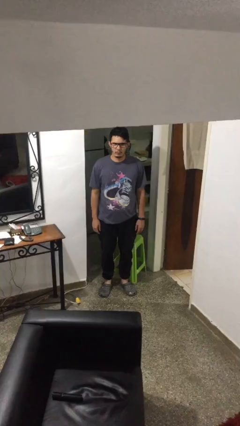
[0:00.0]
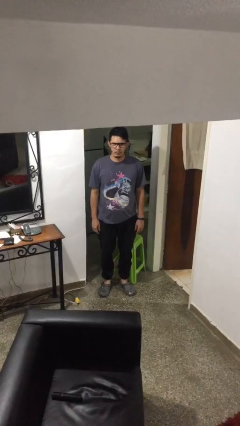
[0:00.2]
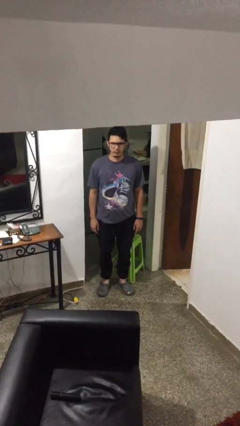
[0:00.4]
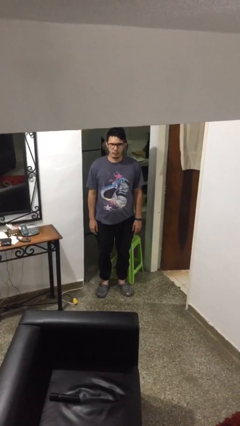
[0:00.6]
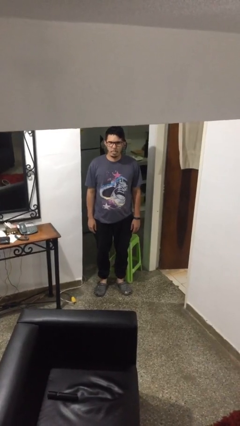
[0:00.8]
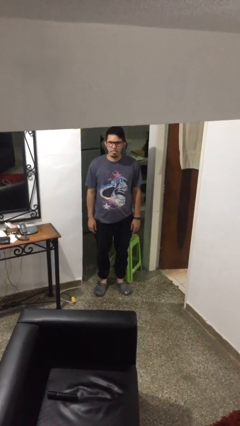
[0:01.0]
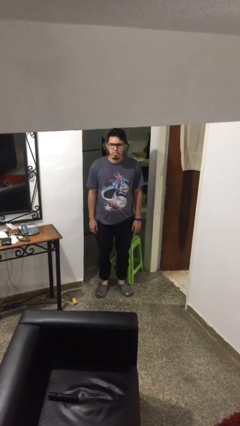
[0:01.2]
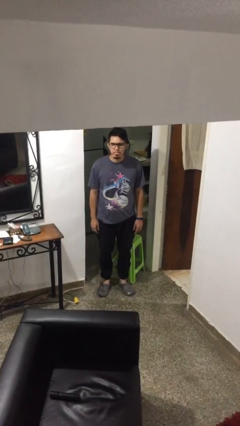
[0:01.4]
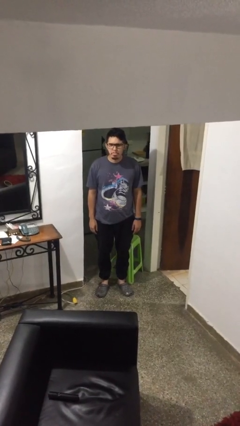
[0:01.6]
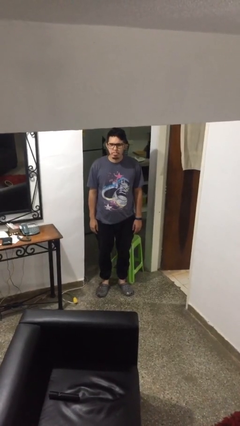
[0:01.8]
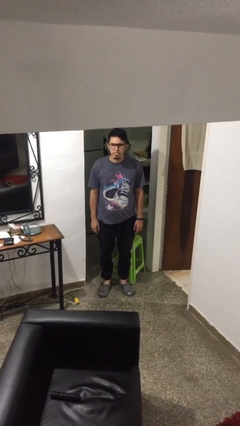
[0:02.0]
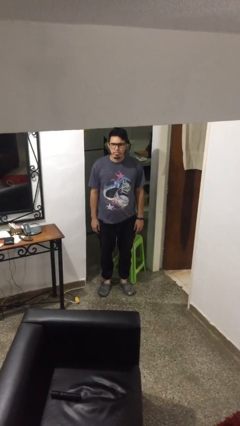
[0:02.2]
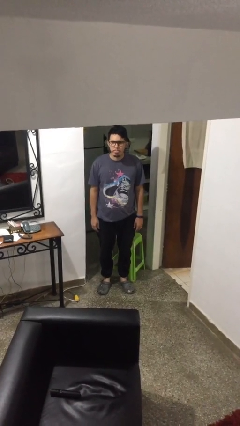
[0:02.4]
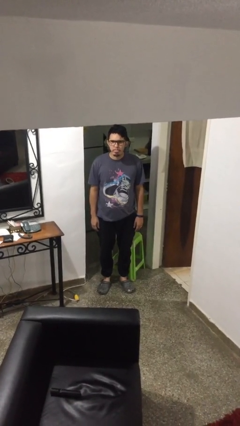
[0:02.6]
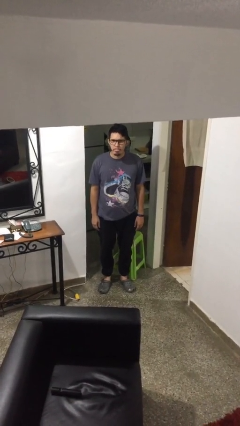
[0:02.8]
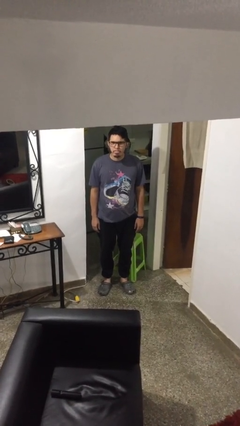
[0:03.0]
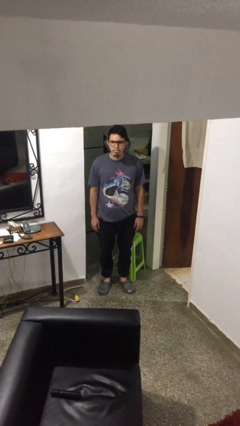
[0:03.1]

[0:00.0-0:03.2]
person sticks out tongue

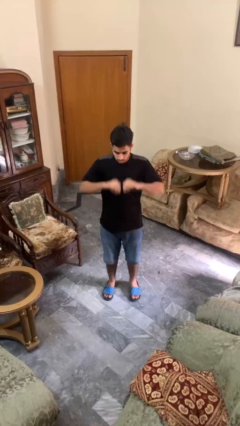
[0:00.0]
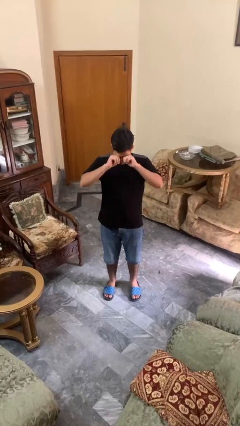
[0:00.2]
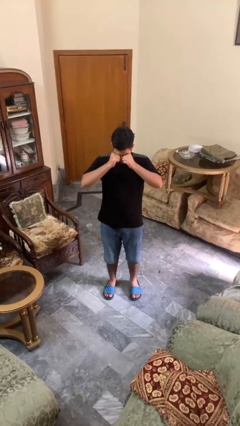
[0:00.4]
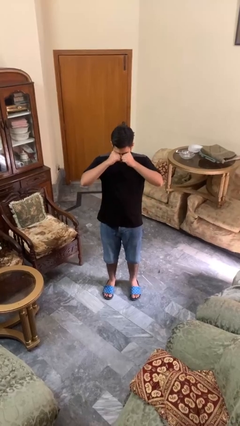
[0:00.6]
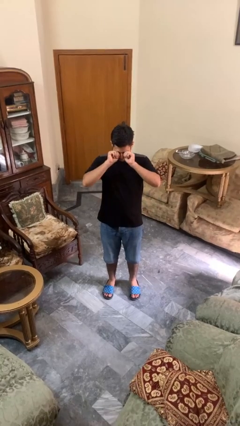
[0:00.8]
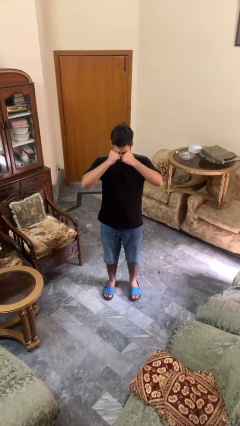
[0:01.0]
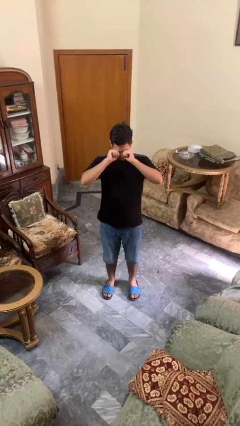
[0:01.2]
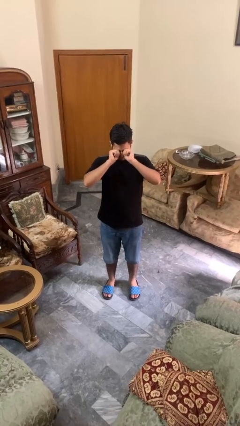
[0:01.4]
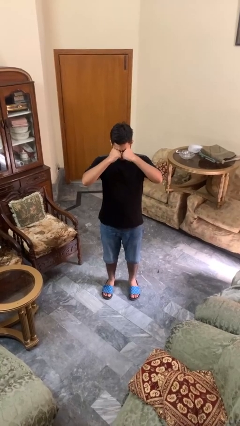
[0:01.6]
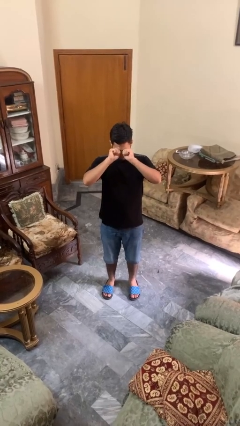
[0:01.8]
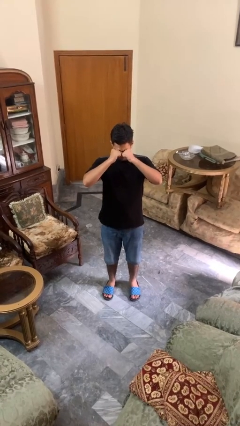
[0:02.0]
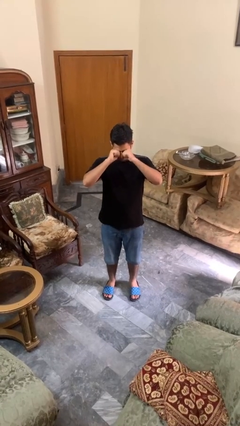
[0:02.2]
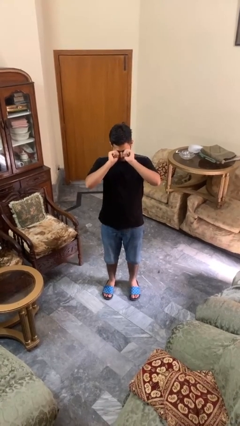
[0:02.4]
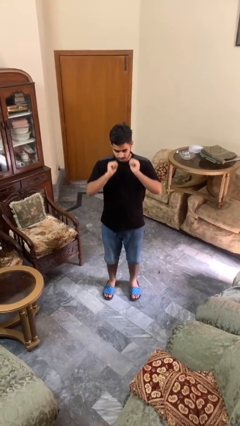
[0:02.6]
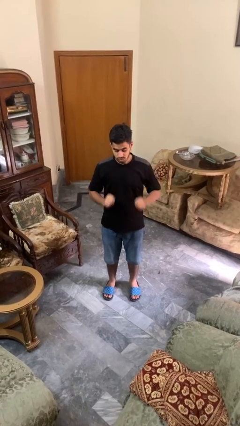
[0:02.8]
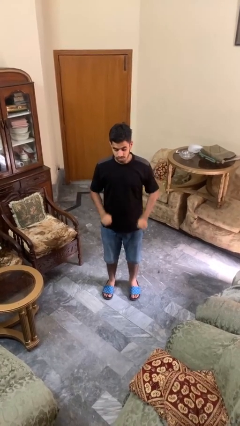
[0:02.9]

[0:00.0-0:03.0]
person rubs eyes

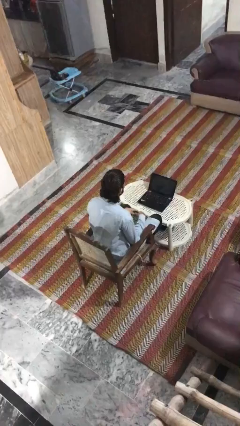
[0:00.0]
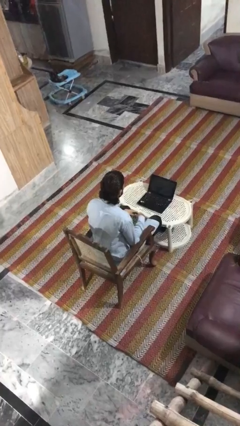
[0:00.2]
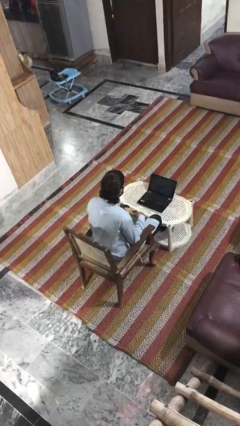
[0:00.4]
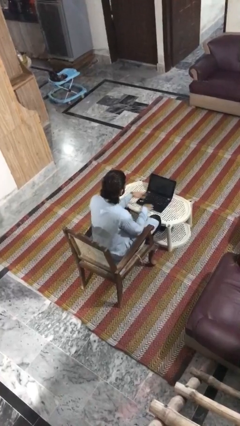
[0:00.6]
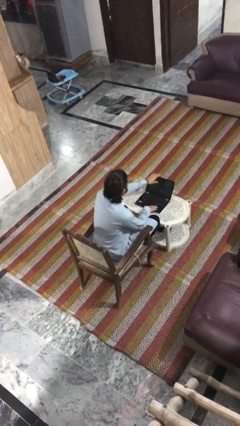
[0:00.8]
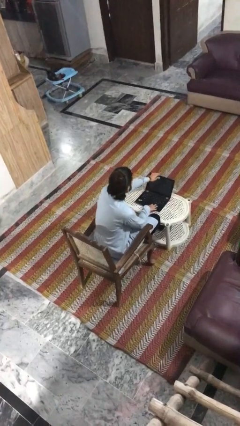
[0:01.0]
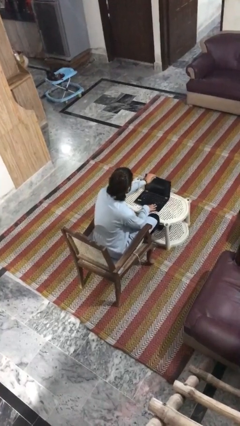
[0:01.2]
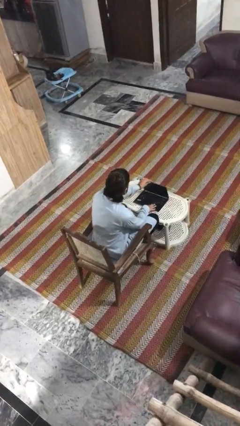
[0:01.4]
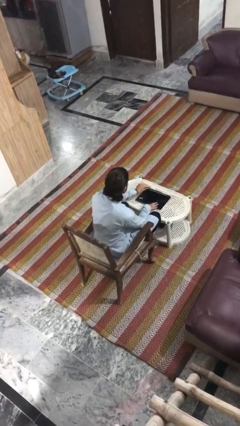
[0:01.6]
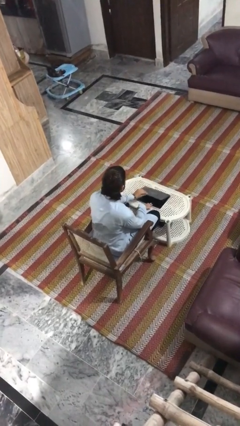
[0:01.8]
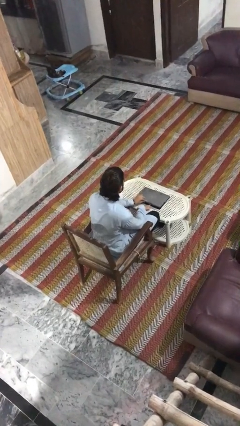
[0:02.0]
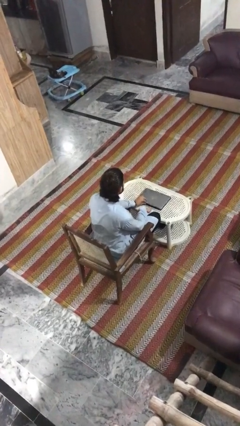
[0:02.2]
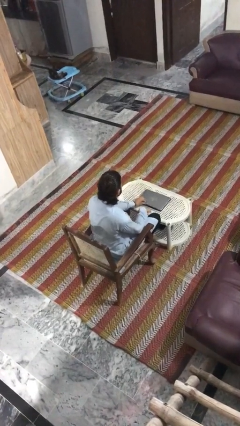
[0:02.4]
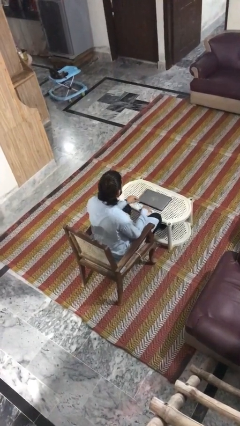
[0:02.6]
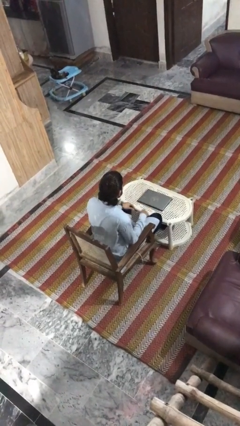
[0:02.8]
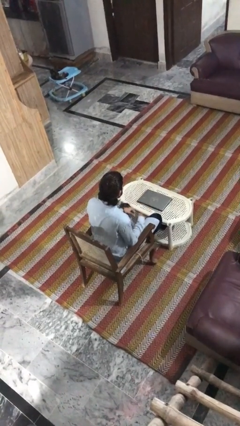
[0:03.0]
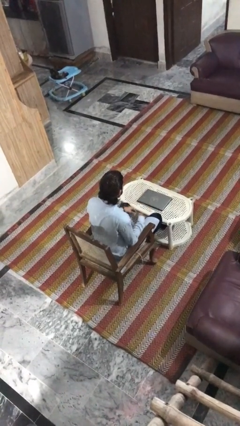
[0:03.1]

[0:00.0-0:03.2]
person closes laptop

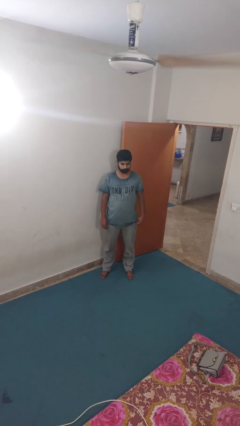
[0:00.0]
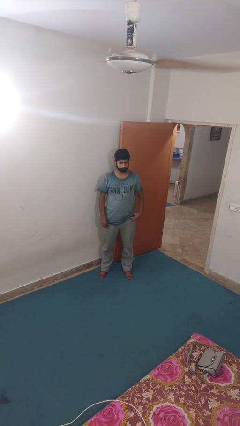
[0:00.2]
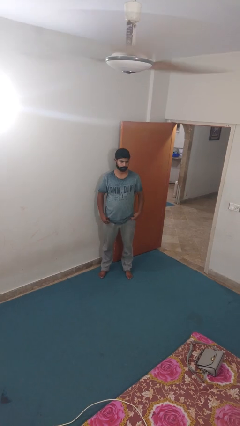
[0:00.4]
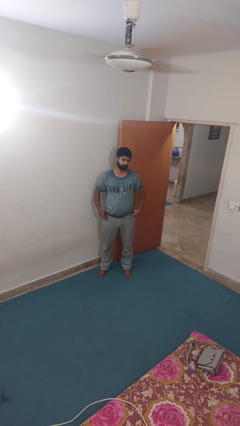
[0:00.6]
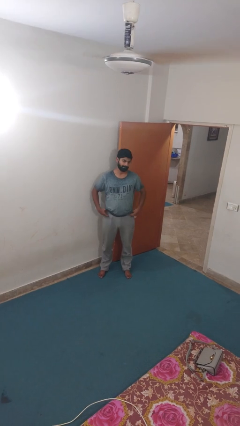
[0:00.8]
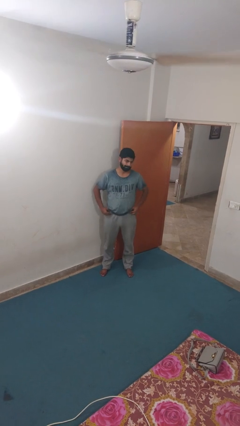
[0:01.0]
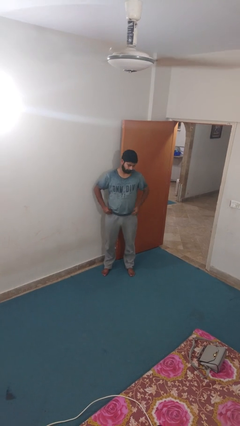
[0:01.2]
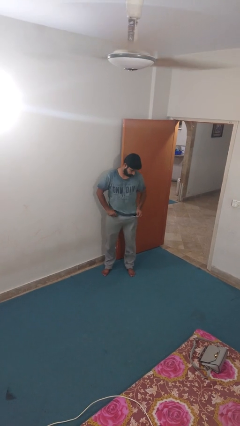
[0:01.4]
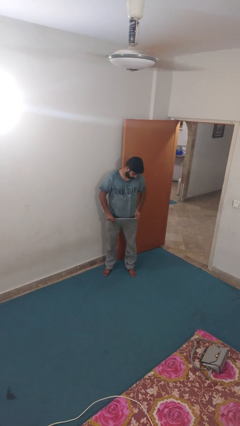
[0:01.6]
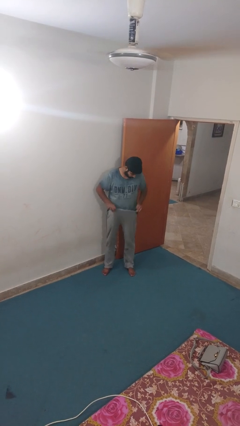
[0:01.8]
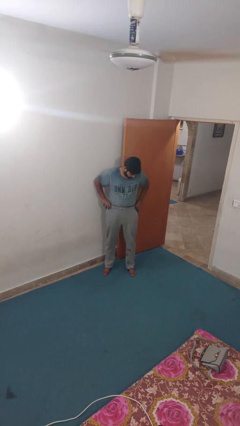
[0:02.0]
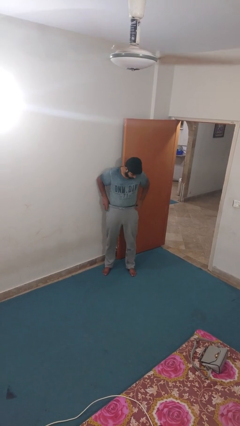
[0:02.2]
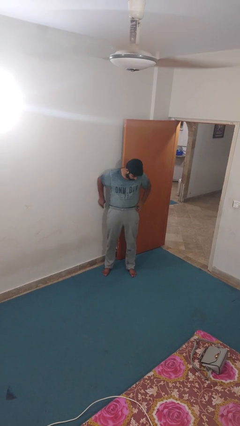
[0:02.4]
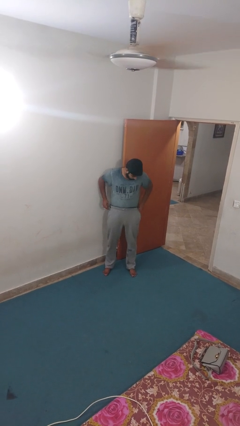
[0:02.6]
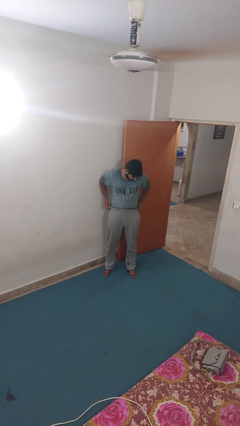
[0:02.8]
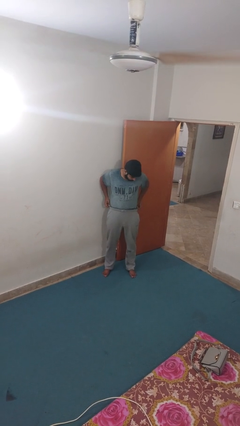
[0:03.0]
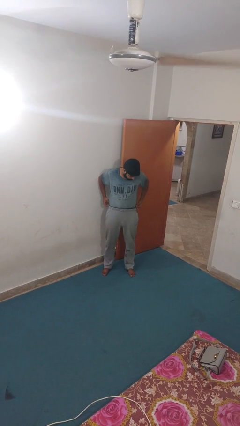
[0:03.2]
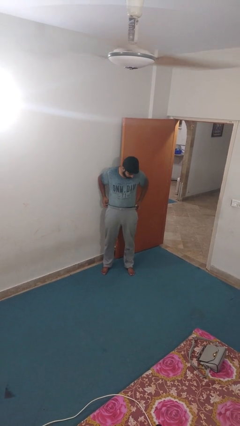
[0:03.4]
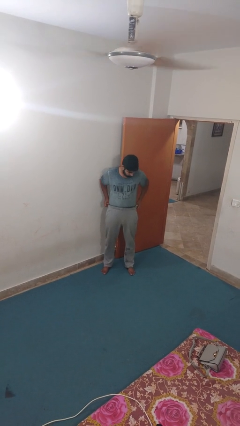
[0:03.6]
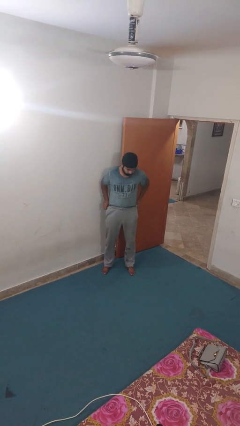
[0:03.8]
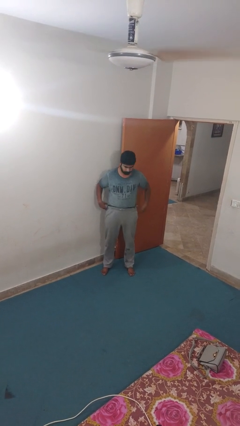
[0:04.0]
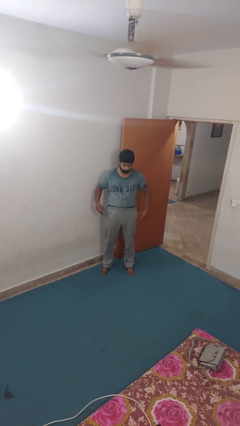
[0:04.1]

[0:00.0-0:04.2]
person tucks in shirt

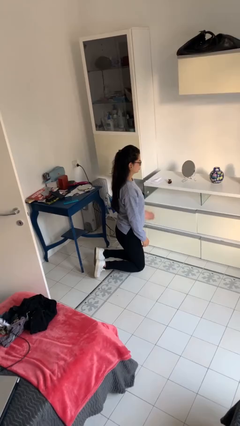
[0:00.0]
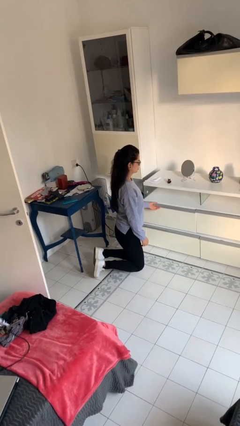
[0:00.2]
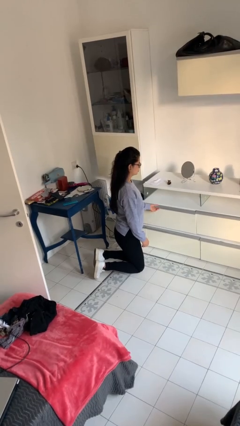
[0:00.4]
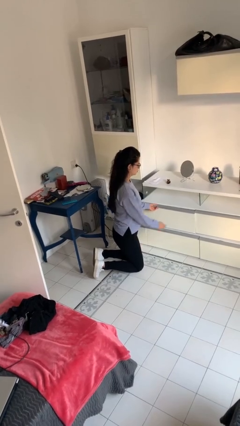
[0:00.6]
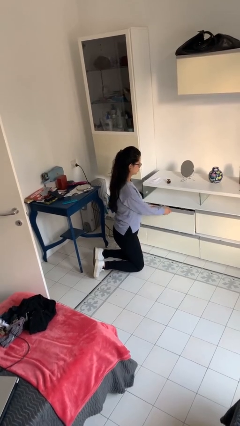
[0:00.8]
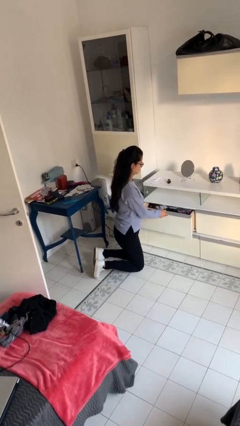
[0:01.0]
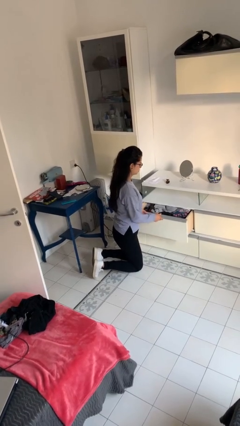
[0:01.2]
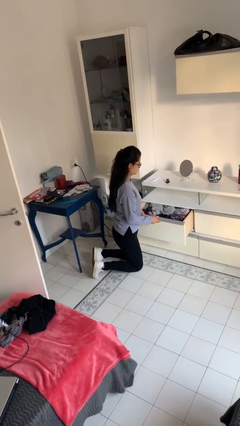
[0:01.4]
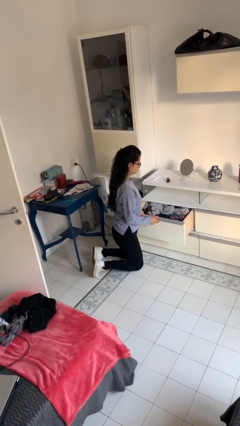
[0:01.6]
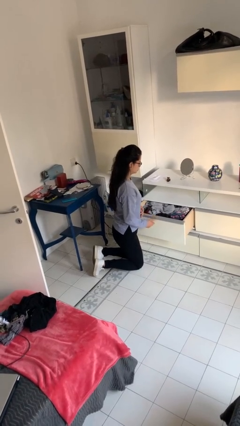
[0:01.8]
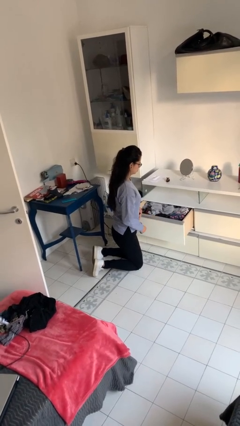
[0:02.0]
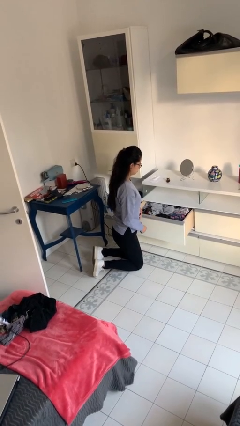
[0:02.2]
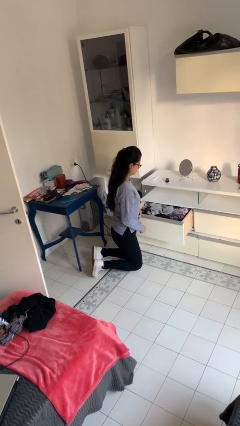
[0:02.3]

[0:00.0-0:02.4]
person opens dresser drawer

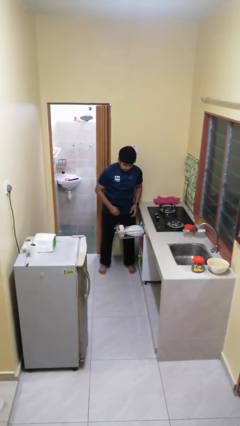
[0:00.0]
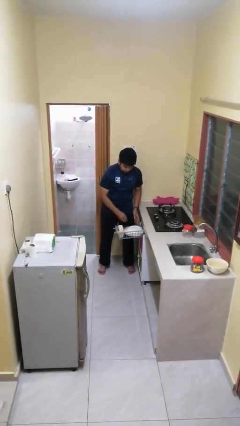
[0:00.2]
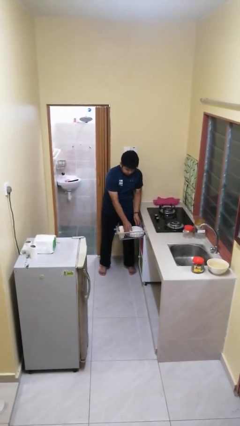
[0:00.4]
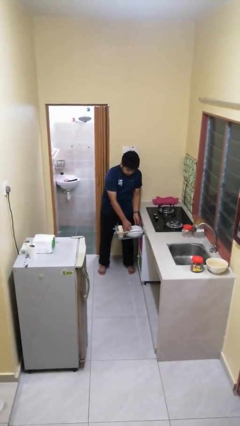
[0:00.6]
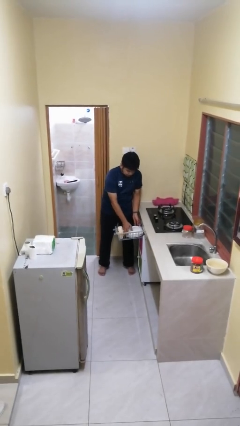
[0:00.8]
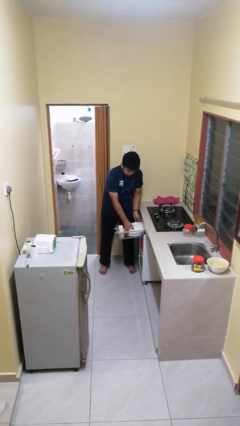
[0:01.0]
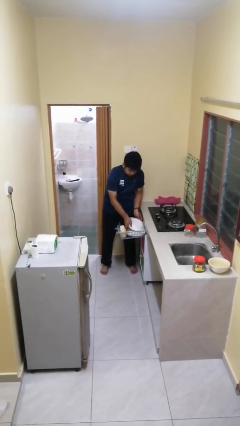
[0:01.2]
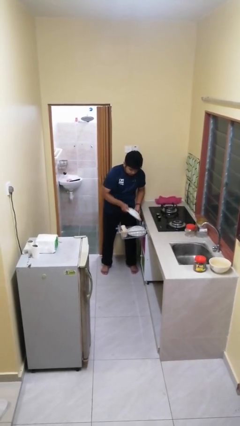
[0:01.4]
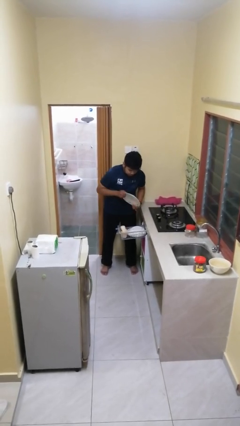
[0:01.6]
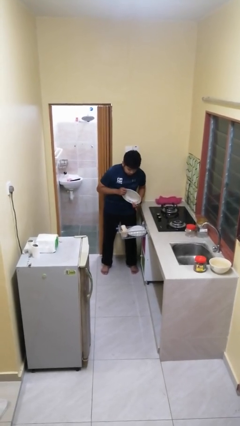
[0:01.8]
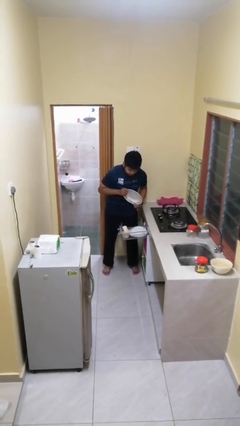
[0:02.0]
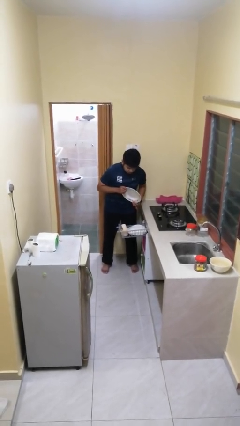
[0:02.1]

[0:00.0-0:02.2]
person takes object from kitchen drawer
